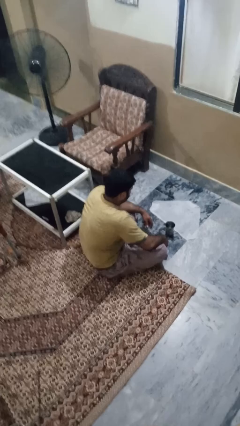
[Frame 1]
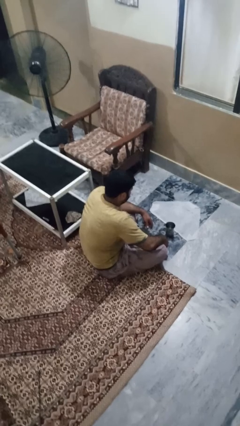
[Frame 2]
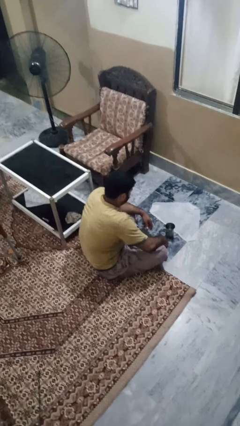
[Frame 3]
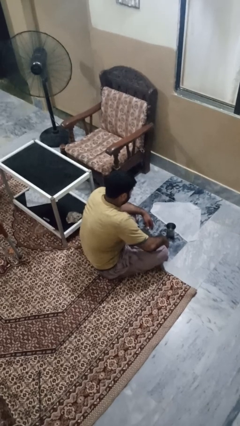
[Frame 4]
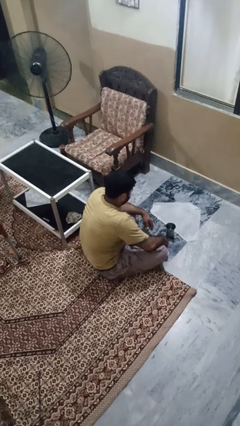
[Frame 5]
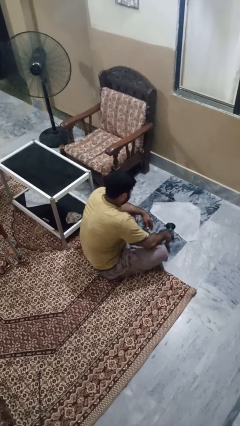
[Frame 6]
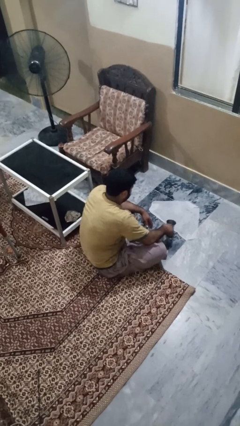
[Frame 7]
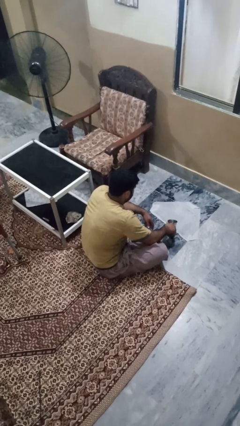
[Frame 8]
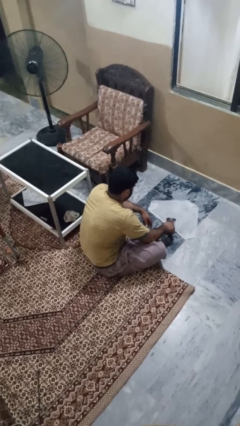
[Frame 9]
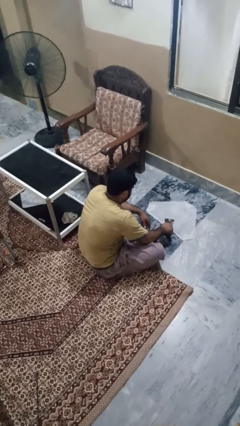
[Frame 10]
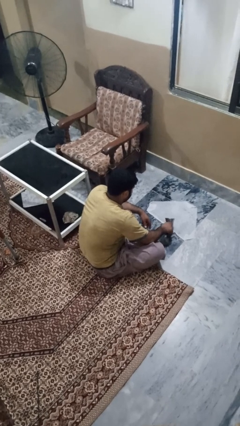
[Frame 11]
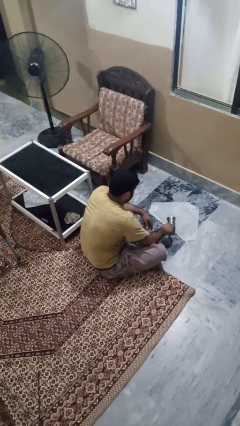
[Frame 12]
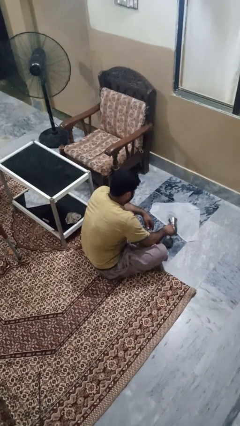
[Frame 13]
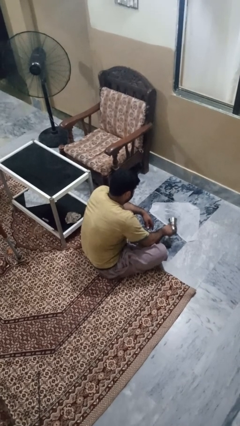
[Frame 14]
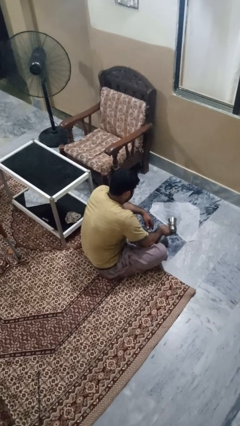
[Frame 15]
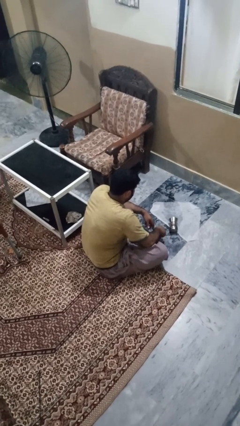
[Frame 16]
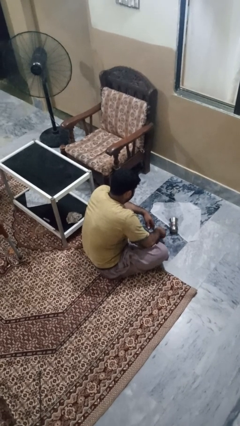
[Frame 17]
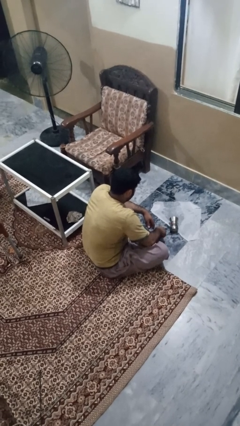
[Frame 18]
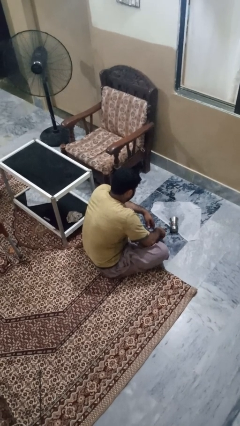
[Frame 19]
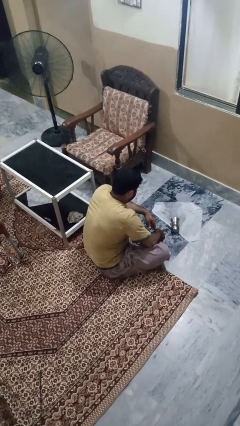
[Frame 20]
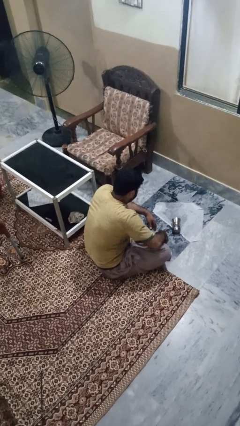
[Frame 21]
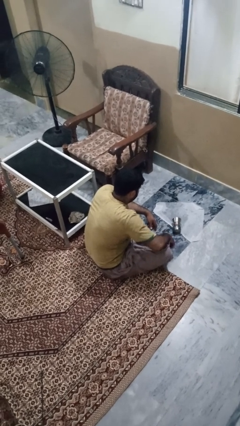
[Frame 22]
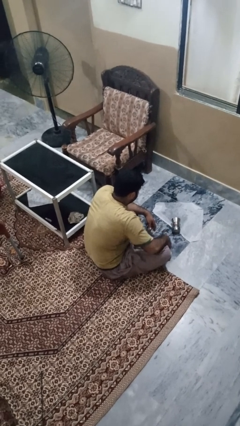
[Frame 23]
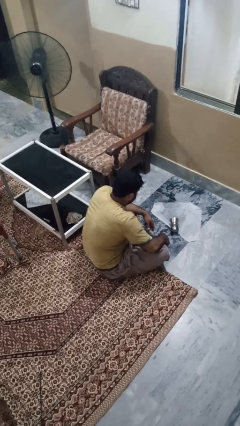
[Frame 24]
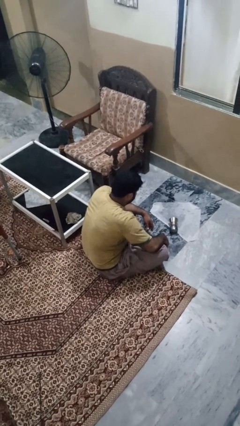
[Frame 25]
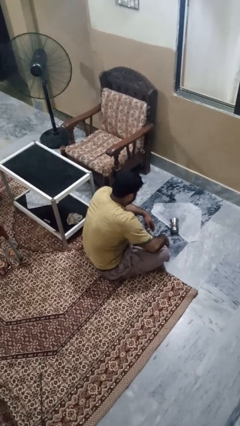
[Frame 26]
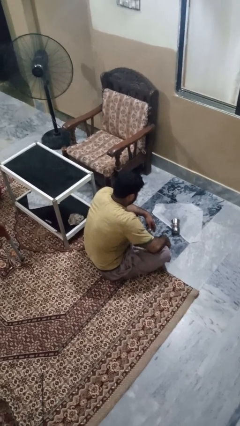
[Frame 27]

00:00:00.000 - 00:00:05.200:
person spills on floor

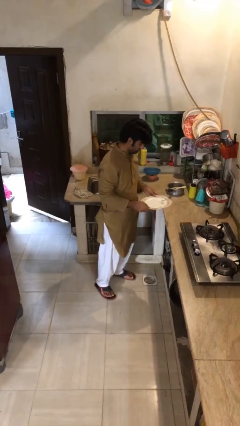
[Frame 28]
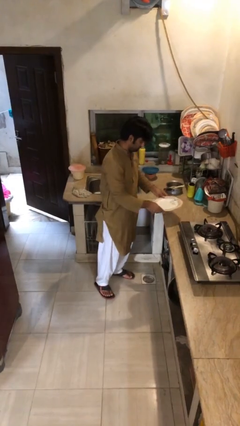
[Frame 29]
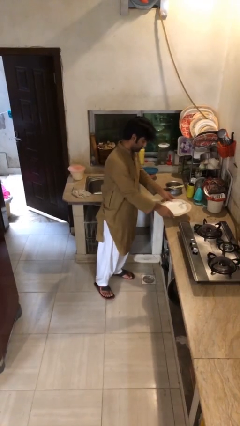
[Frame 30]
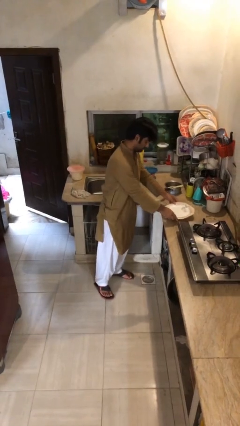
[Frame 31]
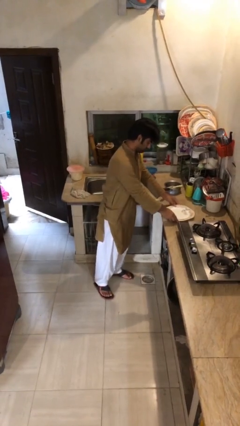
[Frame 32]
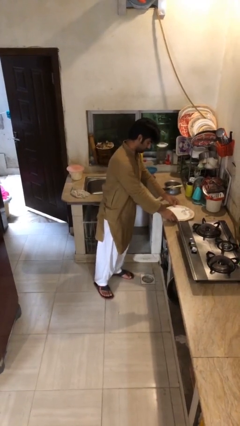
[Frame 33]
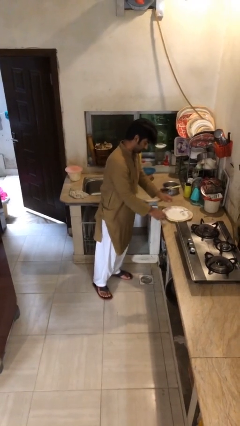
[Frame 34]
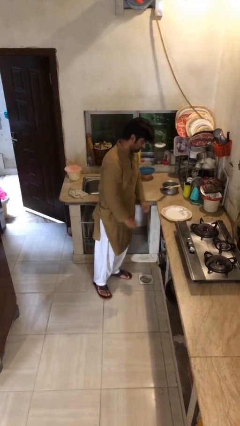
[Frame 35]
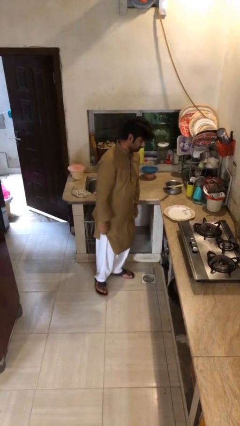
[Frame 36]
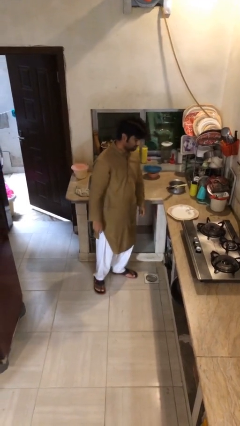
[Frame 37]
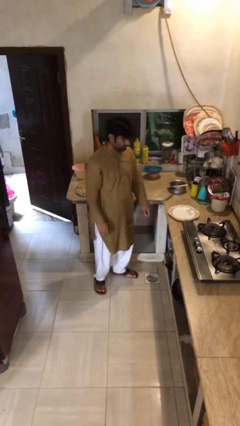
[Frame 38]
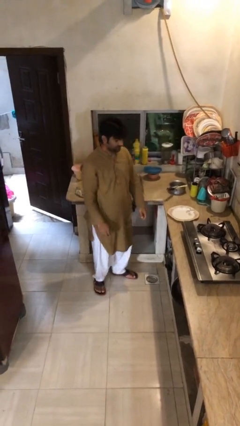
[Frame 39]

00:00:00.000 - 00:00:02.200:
person puts down object on table

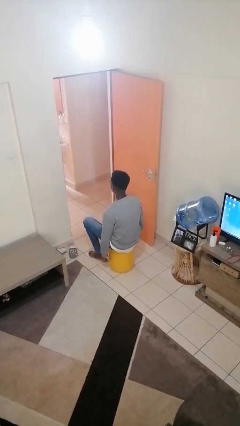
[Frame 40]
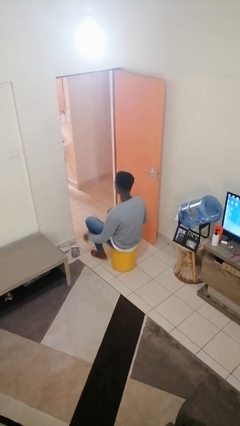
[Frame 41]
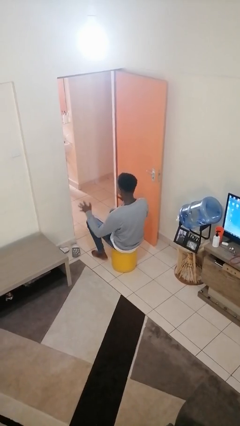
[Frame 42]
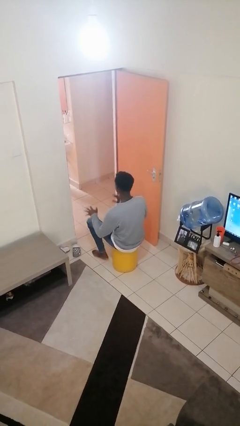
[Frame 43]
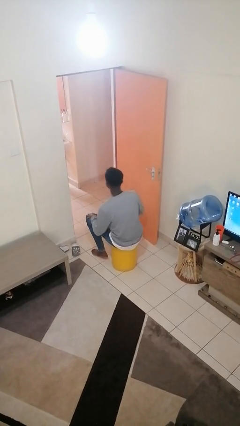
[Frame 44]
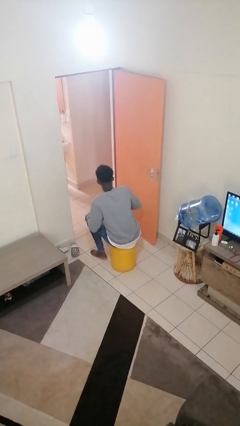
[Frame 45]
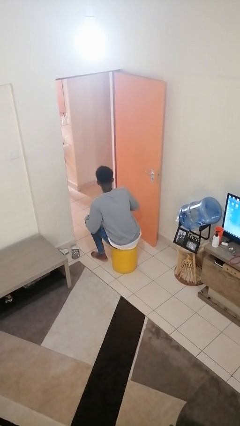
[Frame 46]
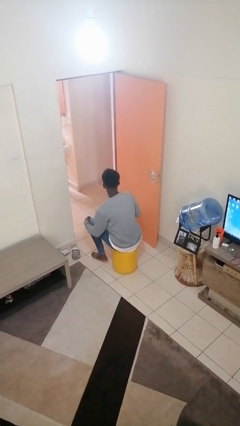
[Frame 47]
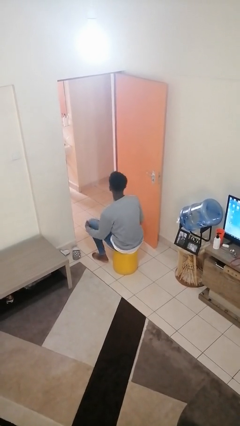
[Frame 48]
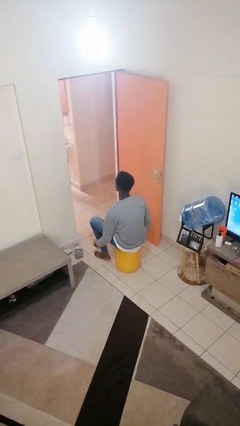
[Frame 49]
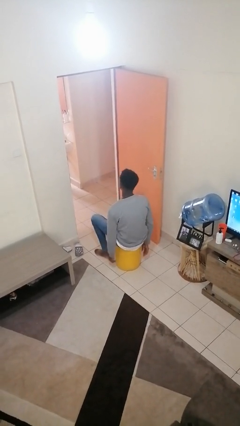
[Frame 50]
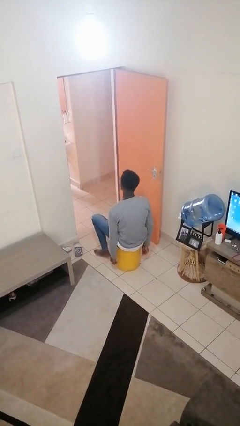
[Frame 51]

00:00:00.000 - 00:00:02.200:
person slaps hands on thighs

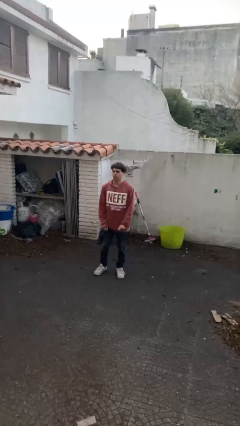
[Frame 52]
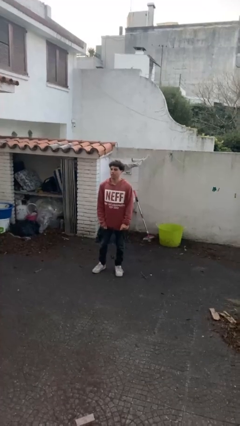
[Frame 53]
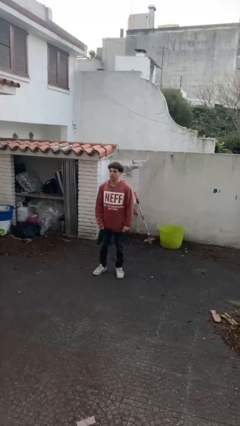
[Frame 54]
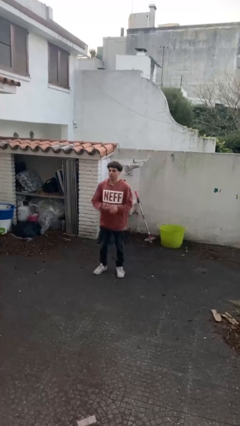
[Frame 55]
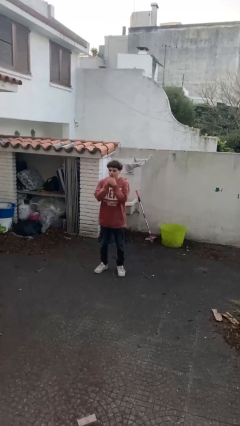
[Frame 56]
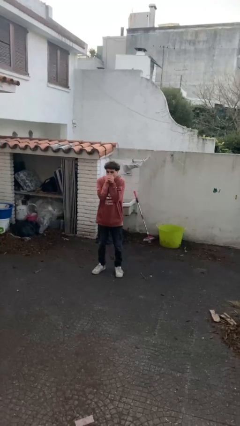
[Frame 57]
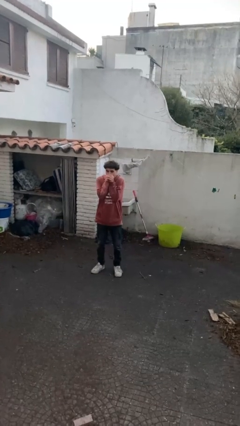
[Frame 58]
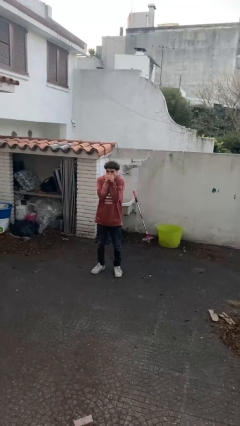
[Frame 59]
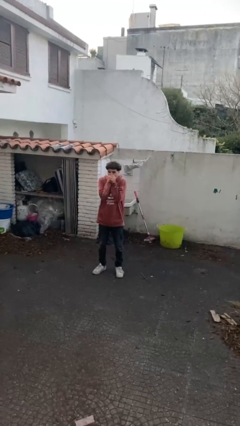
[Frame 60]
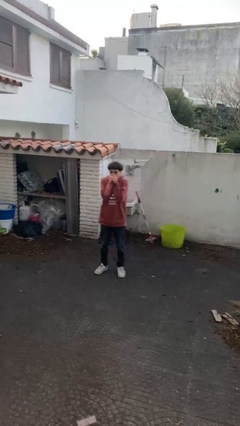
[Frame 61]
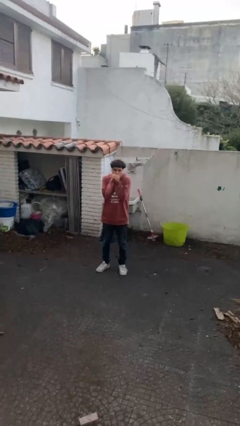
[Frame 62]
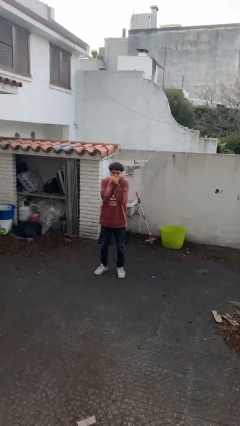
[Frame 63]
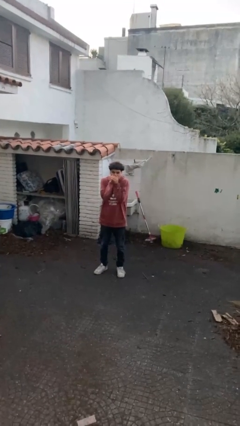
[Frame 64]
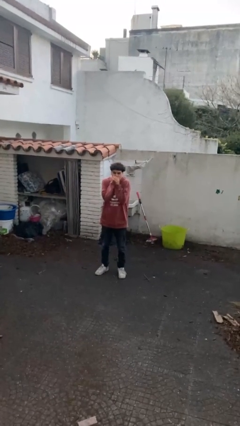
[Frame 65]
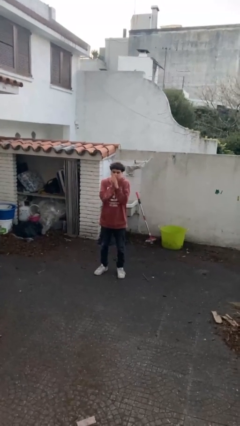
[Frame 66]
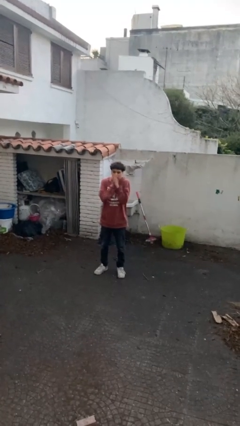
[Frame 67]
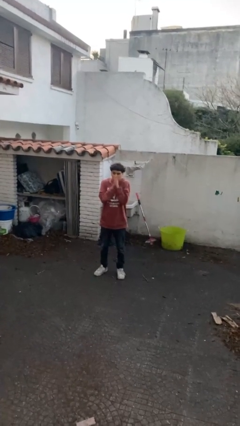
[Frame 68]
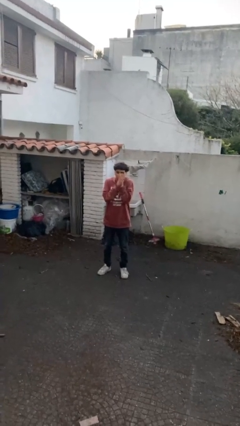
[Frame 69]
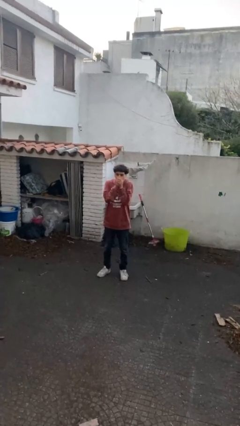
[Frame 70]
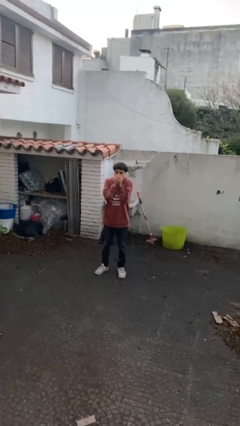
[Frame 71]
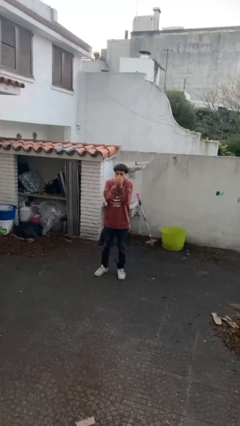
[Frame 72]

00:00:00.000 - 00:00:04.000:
person blows into hands

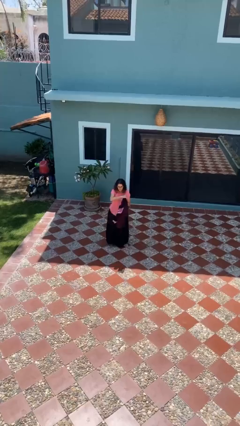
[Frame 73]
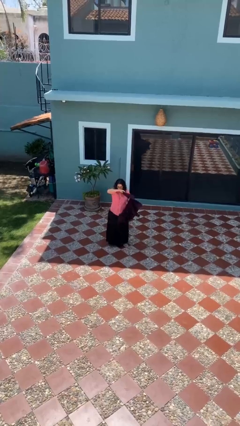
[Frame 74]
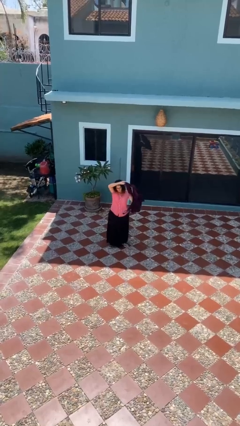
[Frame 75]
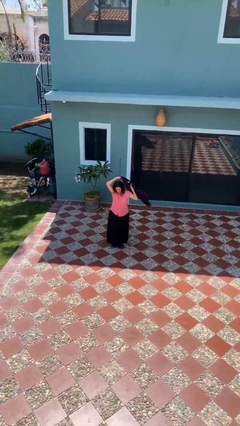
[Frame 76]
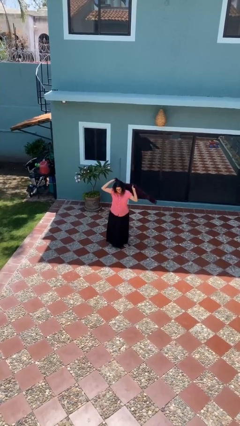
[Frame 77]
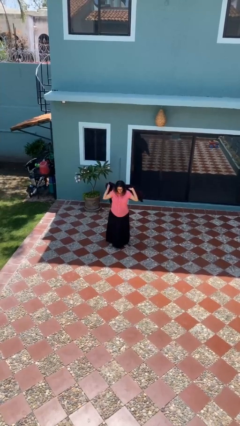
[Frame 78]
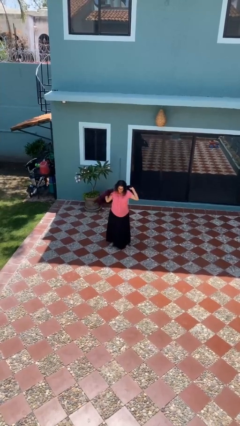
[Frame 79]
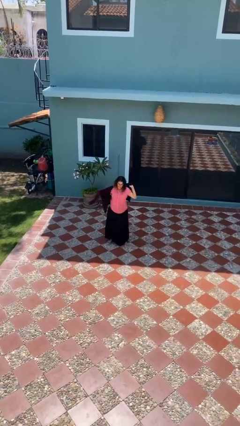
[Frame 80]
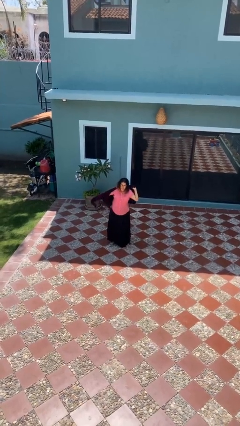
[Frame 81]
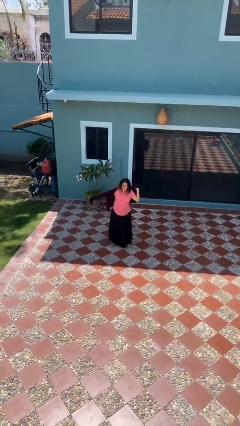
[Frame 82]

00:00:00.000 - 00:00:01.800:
person puts on jacket

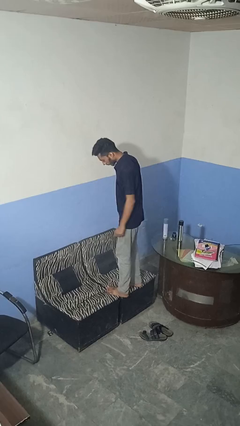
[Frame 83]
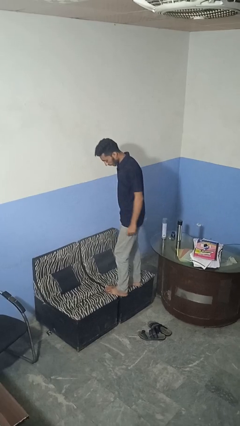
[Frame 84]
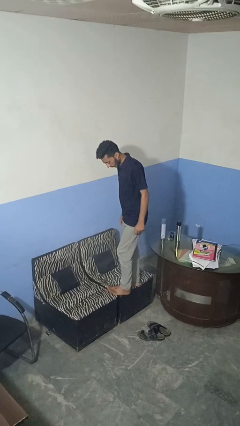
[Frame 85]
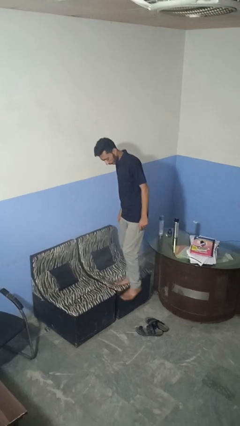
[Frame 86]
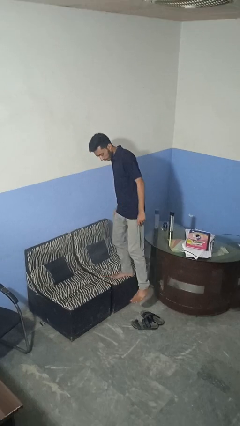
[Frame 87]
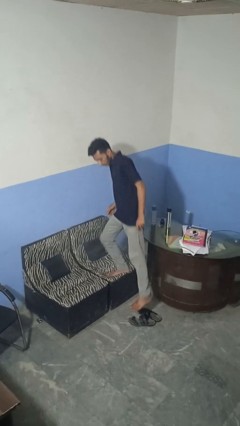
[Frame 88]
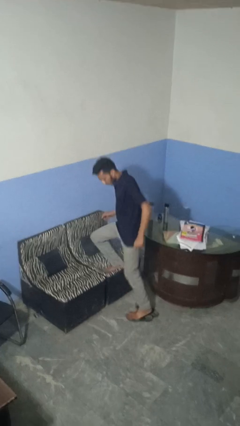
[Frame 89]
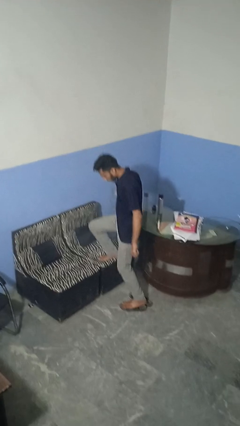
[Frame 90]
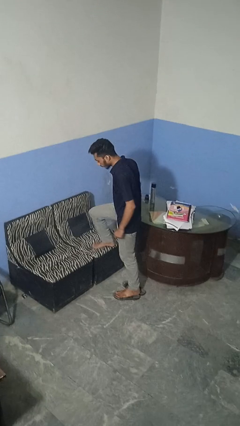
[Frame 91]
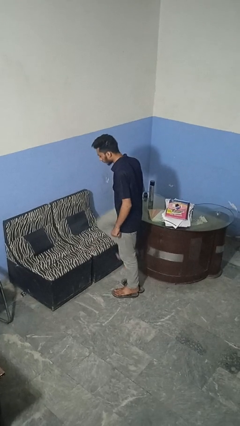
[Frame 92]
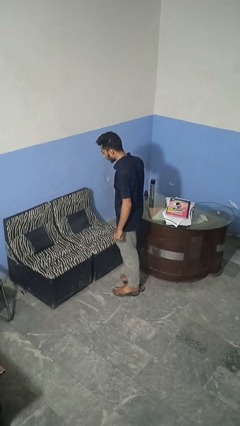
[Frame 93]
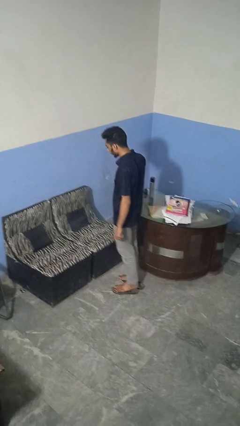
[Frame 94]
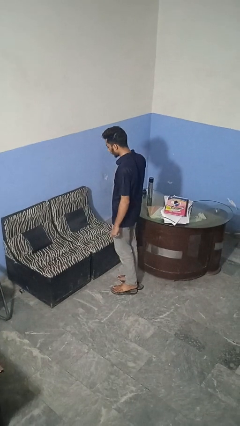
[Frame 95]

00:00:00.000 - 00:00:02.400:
person climbs off couch
